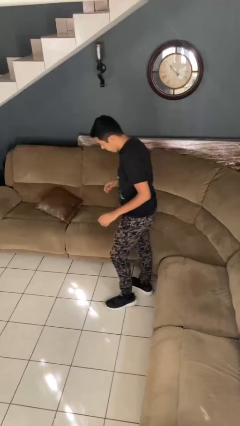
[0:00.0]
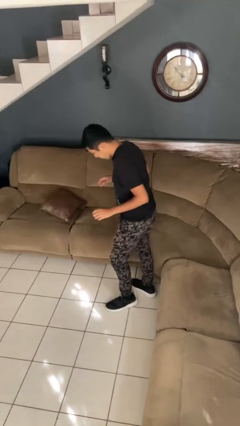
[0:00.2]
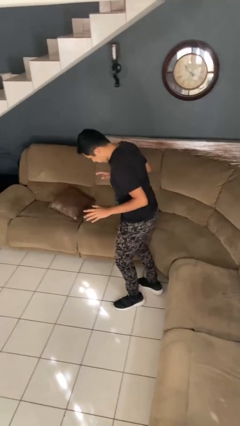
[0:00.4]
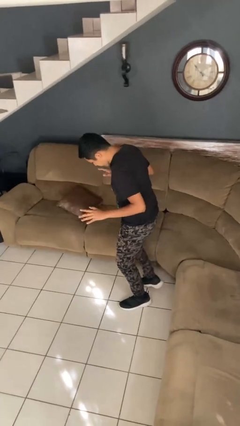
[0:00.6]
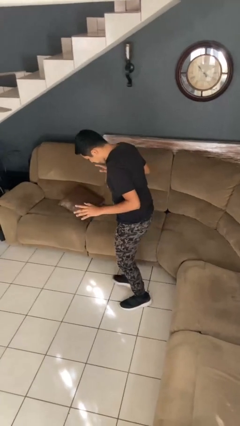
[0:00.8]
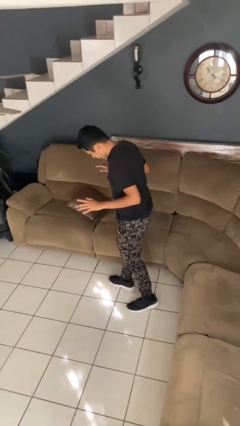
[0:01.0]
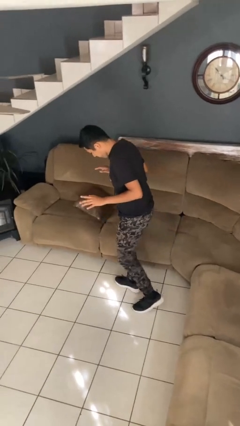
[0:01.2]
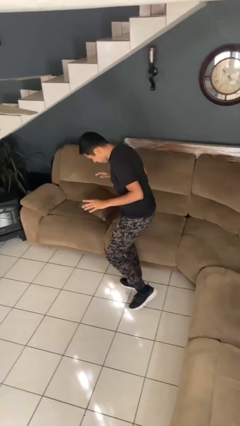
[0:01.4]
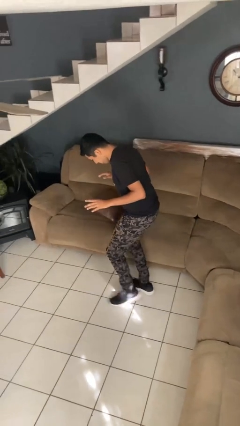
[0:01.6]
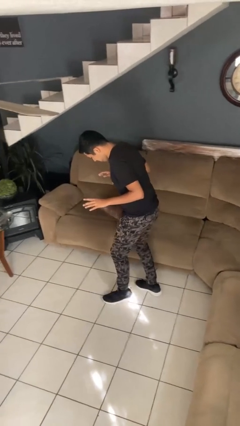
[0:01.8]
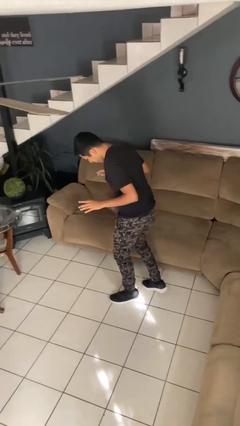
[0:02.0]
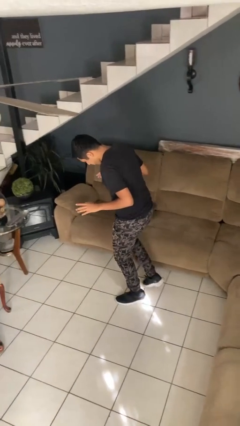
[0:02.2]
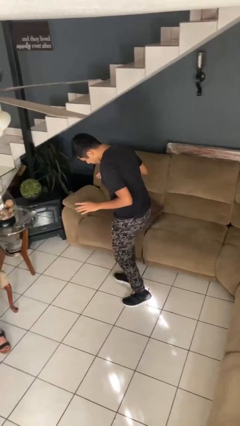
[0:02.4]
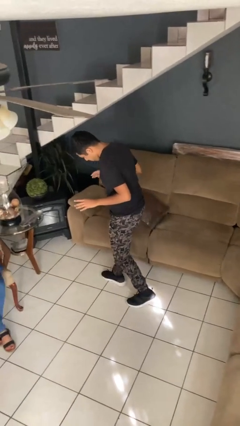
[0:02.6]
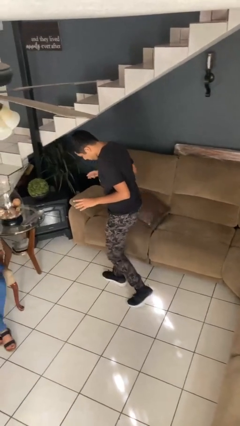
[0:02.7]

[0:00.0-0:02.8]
person walks tiptoe

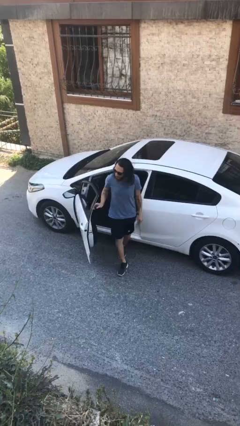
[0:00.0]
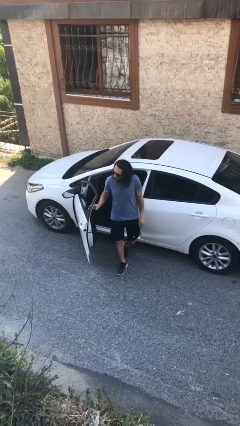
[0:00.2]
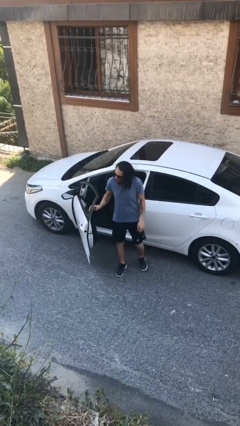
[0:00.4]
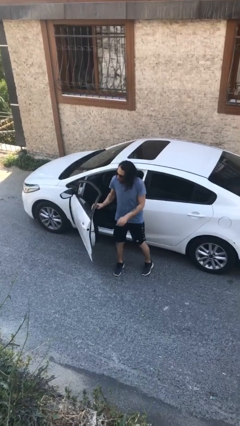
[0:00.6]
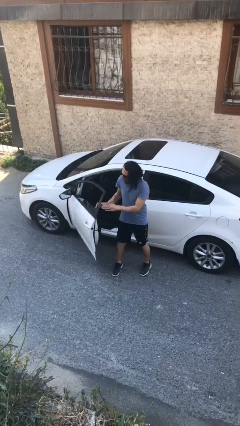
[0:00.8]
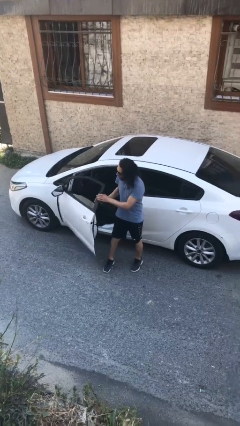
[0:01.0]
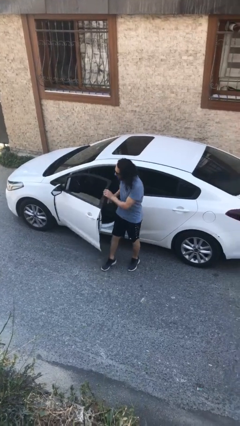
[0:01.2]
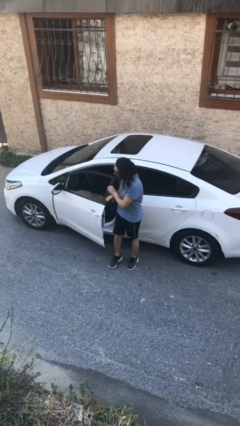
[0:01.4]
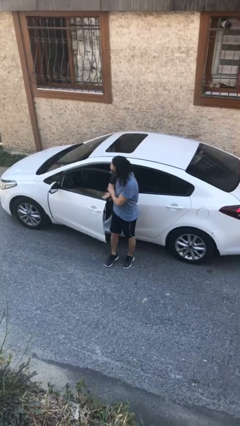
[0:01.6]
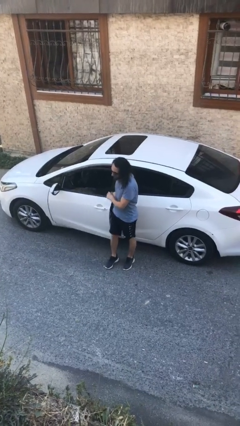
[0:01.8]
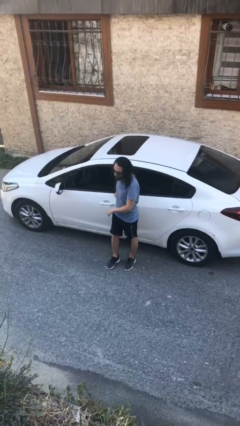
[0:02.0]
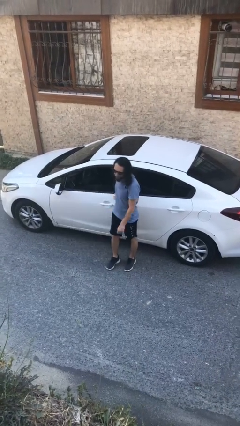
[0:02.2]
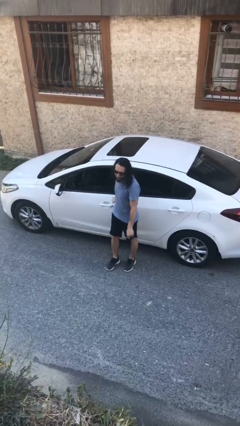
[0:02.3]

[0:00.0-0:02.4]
person closes car door

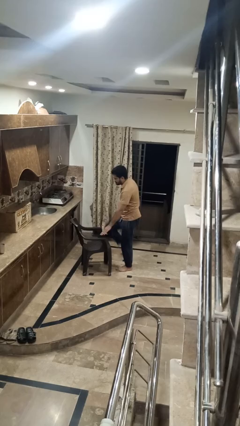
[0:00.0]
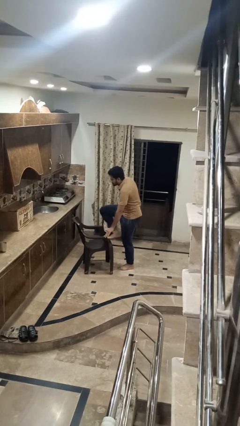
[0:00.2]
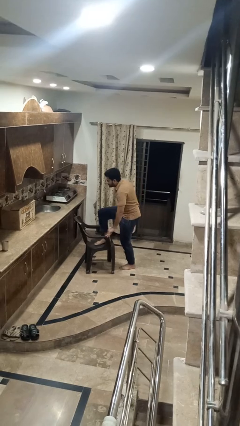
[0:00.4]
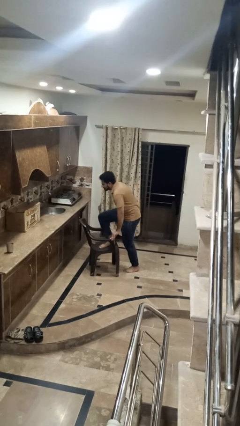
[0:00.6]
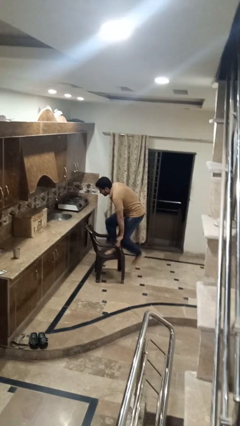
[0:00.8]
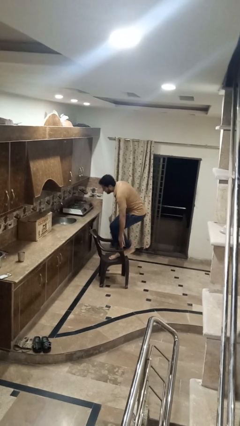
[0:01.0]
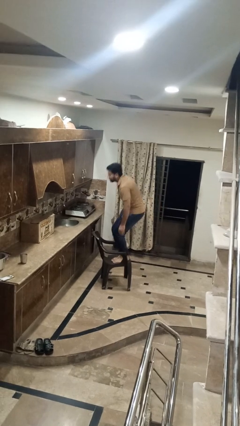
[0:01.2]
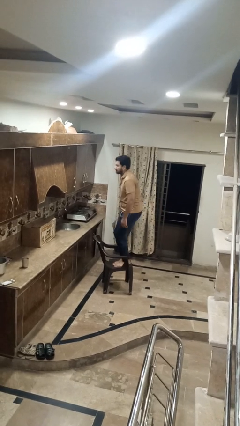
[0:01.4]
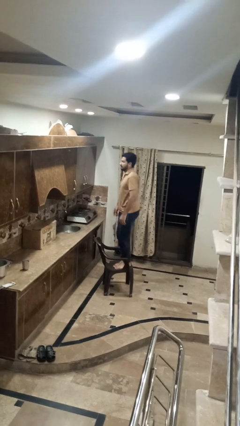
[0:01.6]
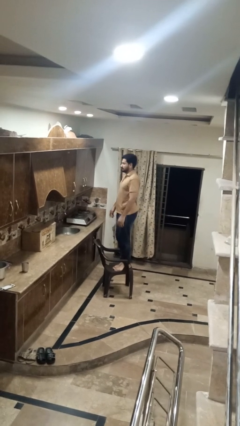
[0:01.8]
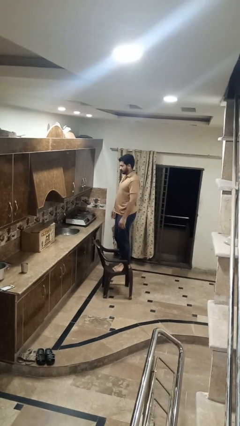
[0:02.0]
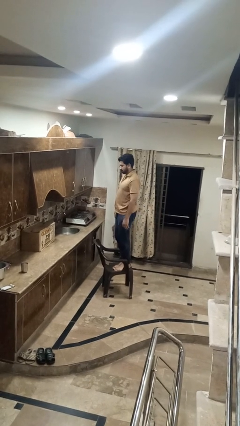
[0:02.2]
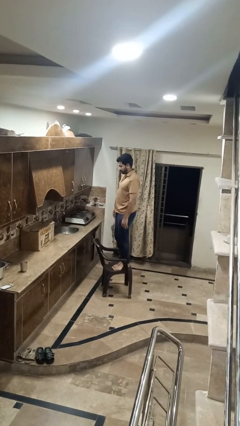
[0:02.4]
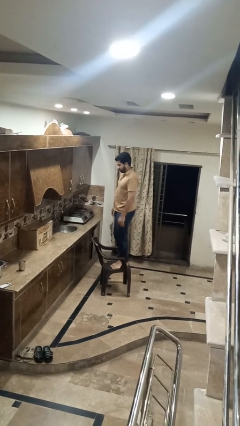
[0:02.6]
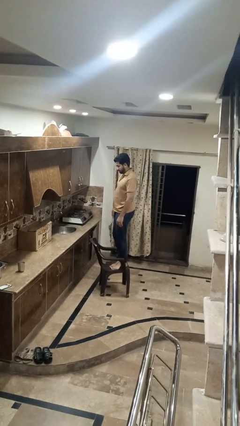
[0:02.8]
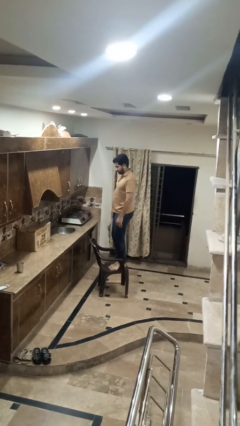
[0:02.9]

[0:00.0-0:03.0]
person climbs on chair

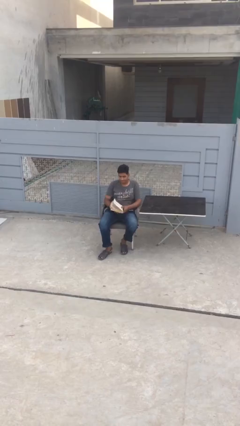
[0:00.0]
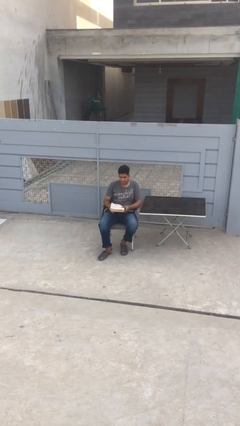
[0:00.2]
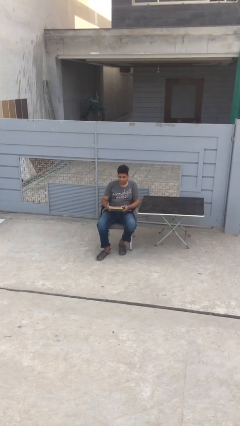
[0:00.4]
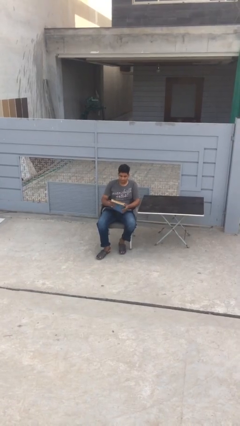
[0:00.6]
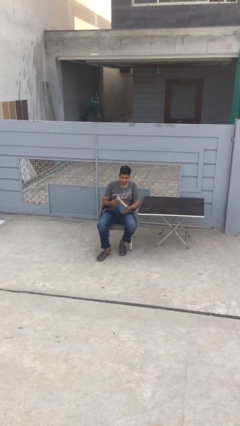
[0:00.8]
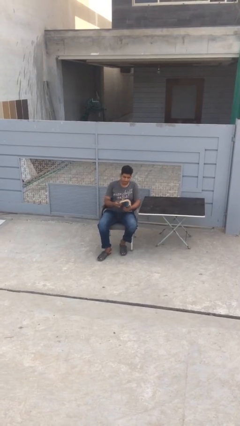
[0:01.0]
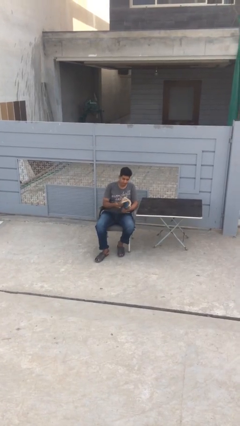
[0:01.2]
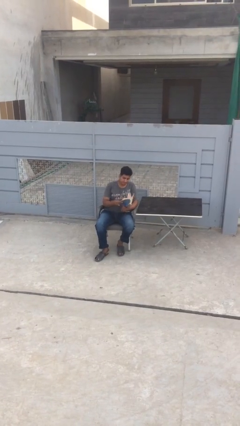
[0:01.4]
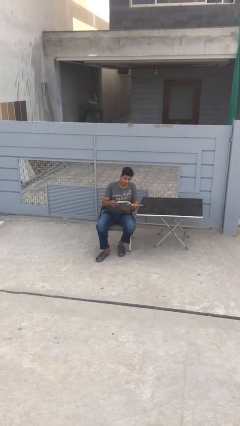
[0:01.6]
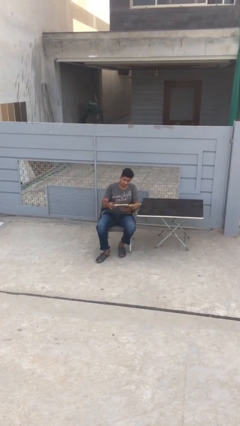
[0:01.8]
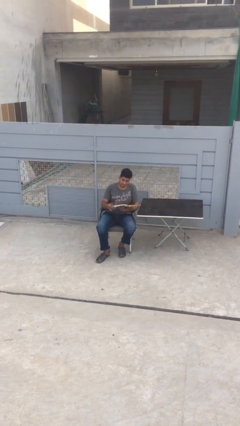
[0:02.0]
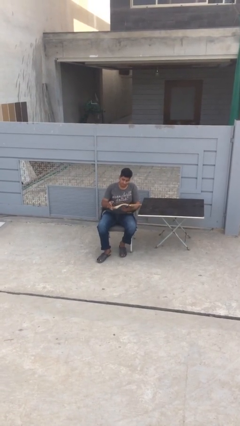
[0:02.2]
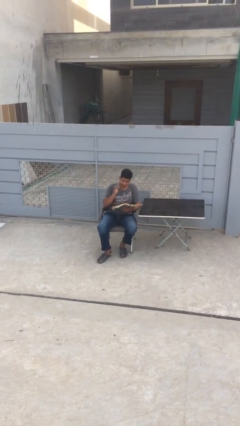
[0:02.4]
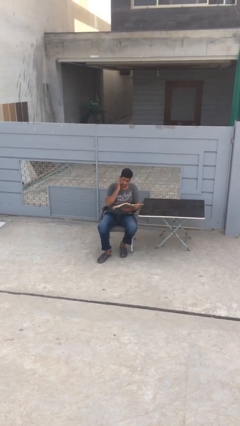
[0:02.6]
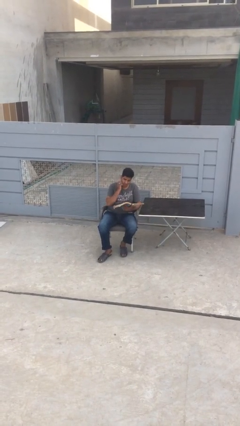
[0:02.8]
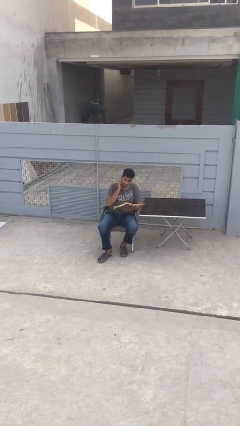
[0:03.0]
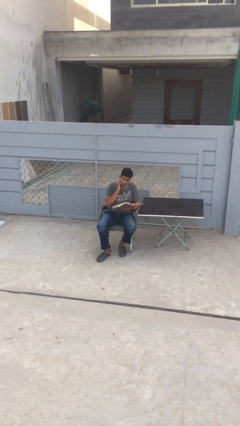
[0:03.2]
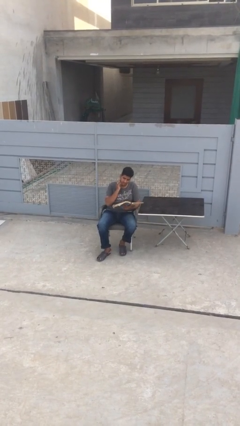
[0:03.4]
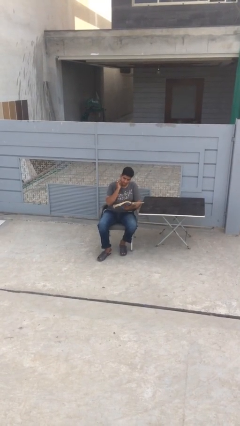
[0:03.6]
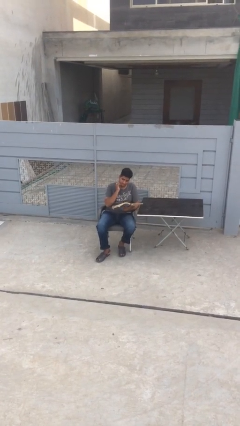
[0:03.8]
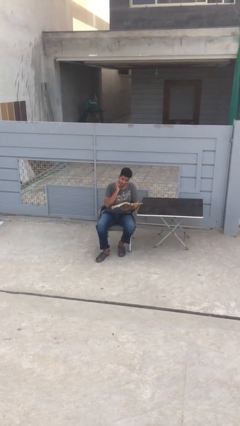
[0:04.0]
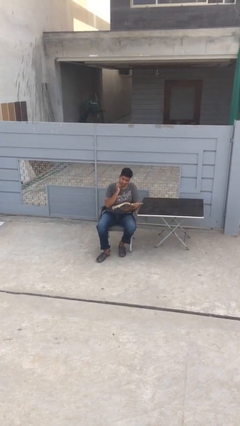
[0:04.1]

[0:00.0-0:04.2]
person reads document

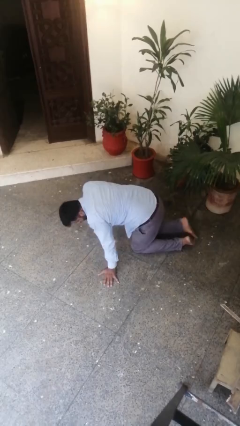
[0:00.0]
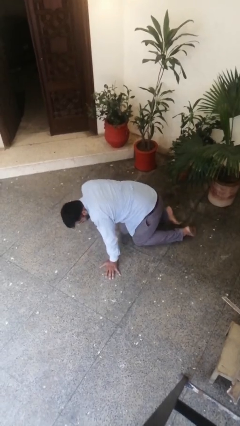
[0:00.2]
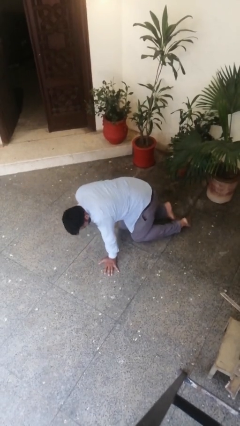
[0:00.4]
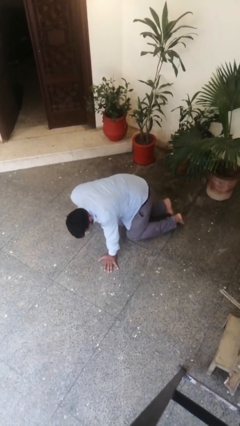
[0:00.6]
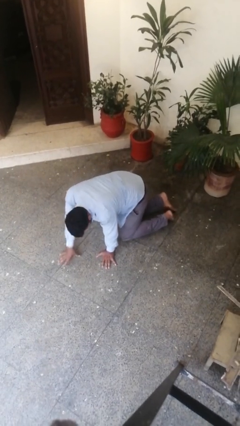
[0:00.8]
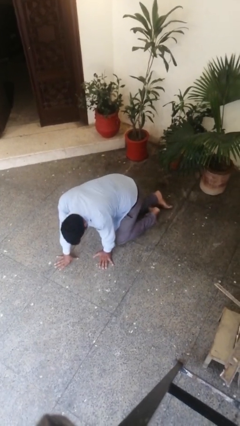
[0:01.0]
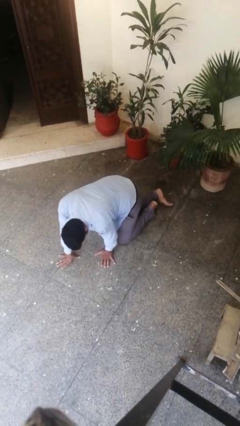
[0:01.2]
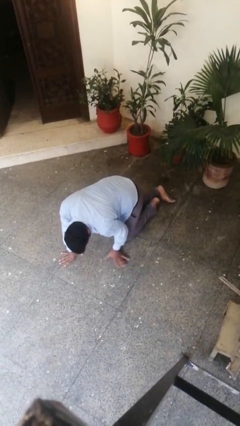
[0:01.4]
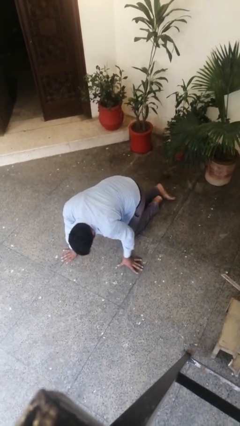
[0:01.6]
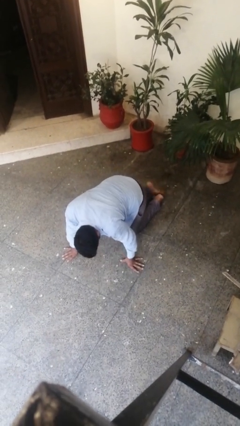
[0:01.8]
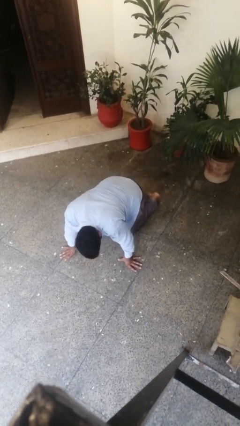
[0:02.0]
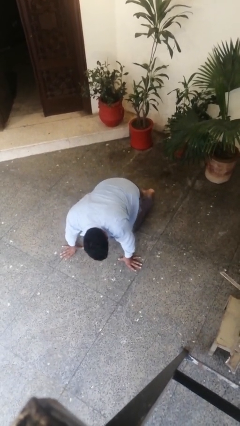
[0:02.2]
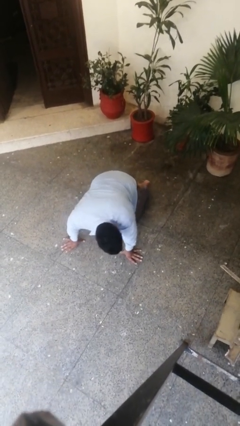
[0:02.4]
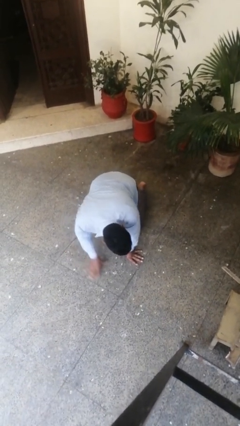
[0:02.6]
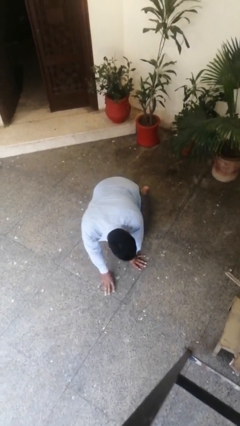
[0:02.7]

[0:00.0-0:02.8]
person crawls

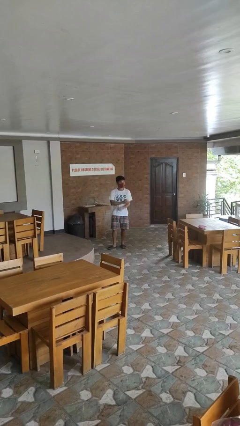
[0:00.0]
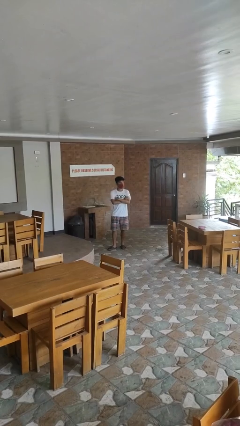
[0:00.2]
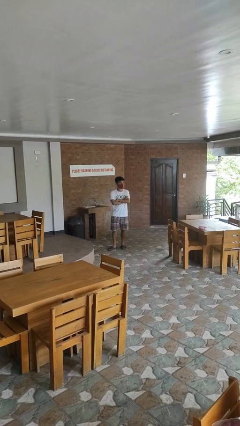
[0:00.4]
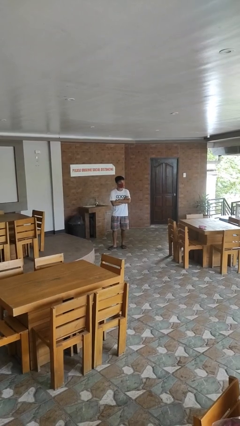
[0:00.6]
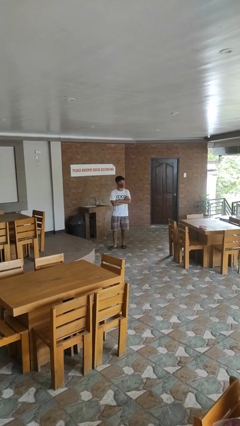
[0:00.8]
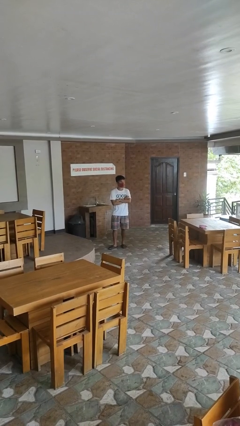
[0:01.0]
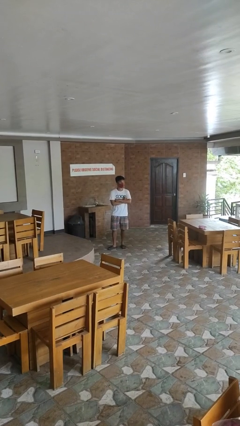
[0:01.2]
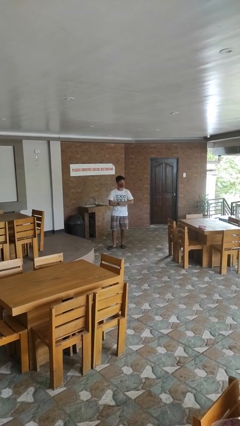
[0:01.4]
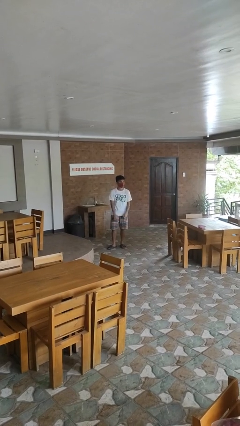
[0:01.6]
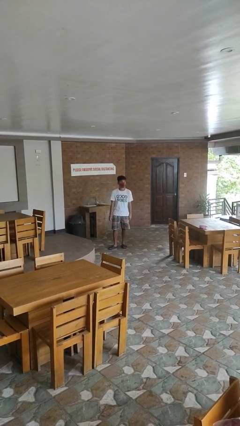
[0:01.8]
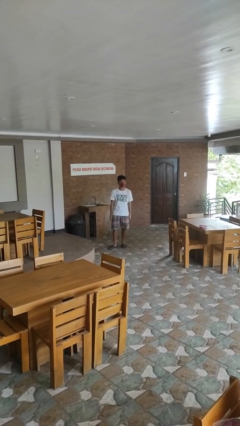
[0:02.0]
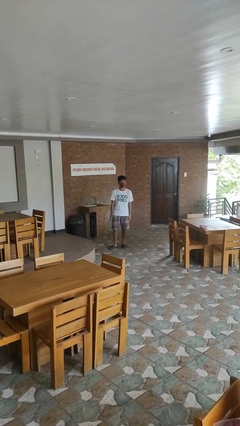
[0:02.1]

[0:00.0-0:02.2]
person brushes teeth
